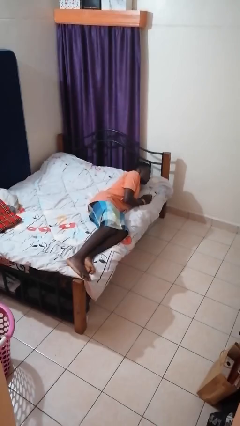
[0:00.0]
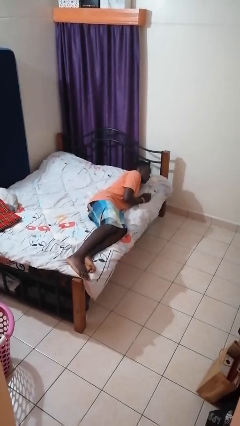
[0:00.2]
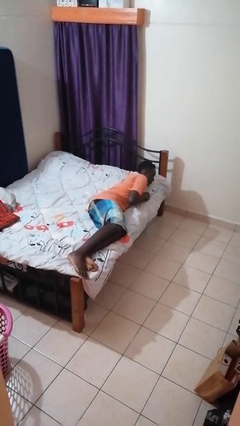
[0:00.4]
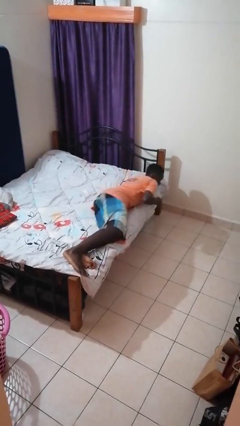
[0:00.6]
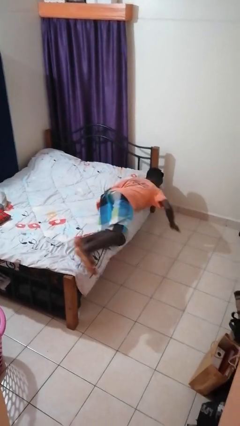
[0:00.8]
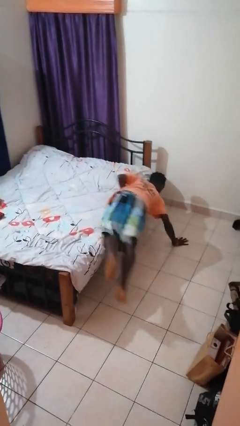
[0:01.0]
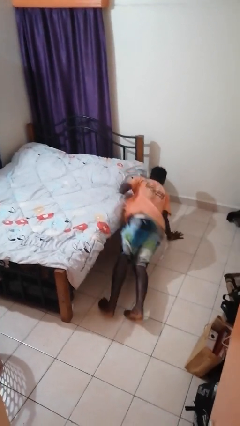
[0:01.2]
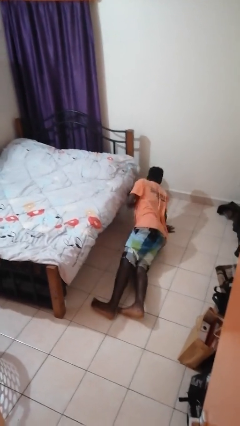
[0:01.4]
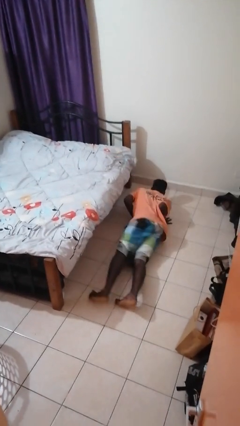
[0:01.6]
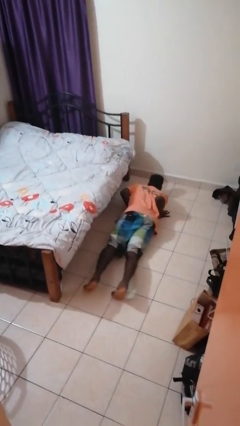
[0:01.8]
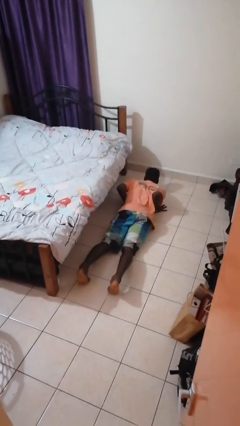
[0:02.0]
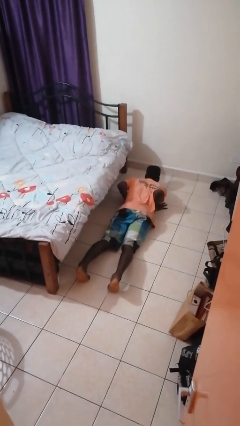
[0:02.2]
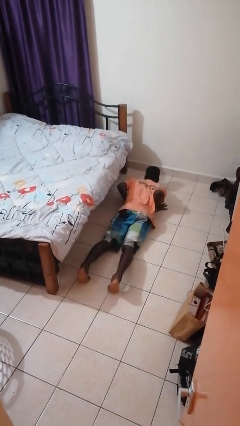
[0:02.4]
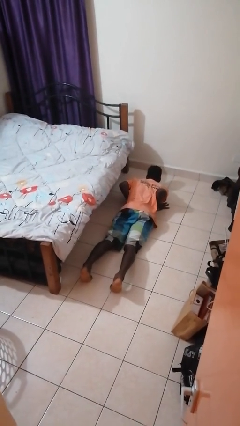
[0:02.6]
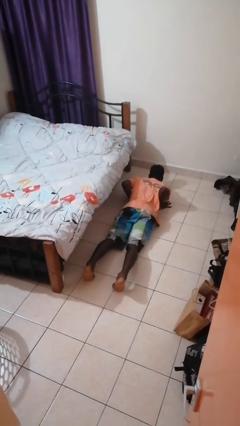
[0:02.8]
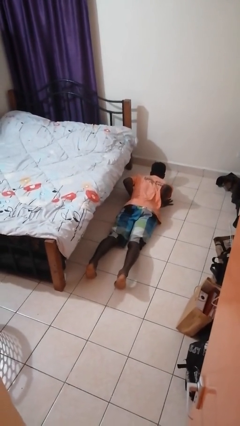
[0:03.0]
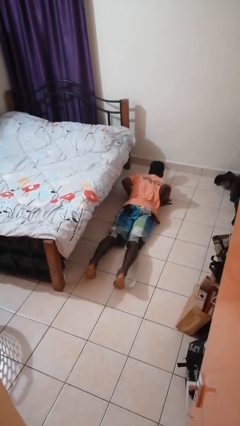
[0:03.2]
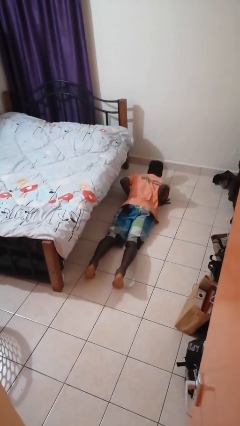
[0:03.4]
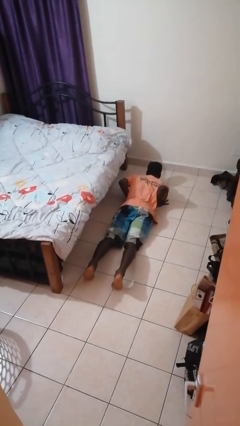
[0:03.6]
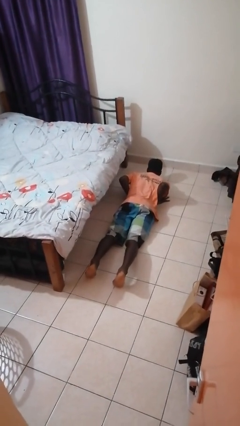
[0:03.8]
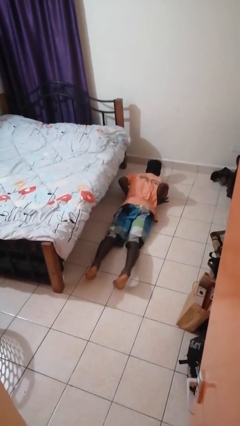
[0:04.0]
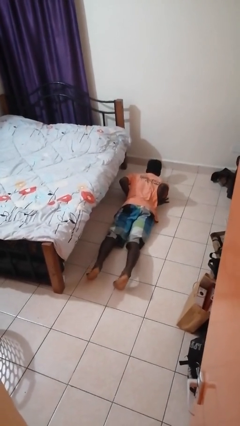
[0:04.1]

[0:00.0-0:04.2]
person falls from bed

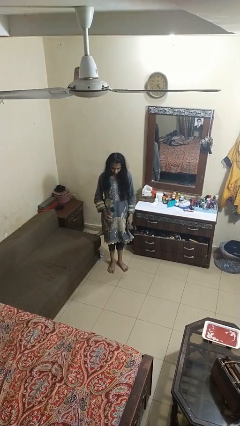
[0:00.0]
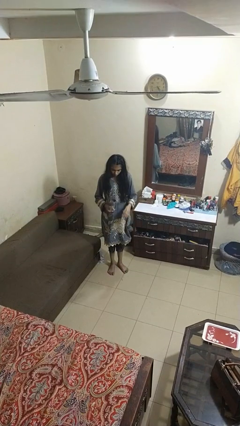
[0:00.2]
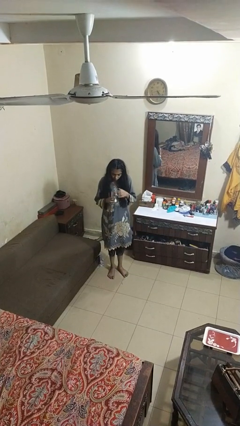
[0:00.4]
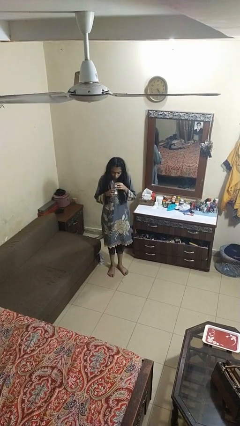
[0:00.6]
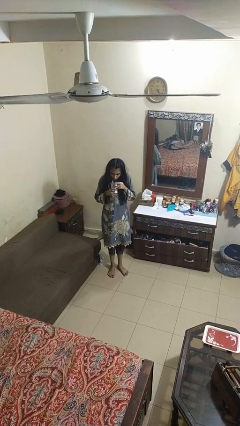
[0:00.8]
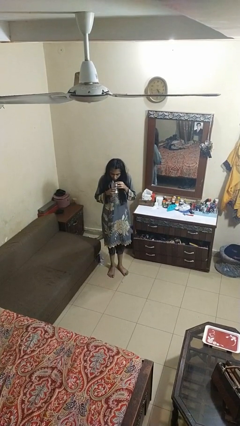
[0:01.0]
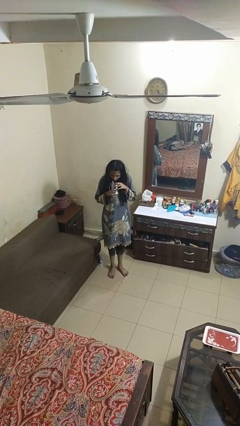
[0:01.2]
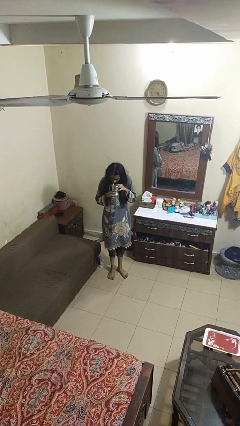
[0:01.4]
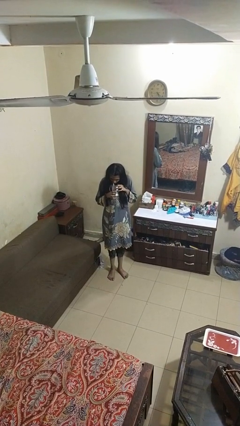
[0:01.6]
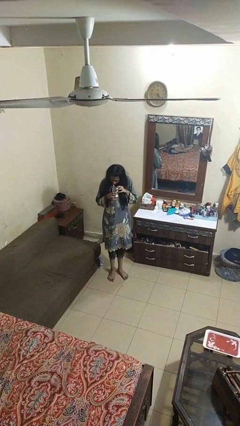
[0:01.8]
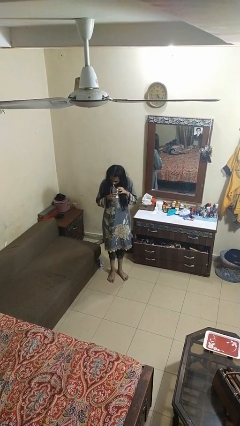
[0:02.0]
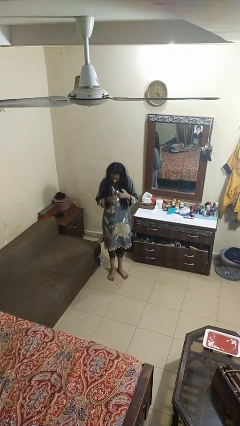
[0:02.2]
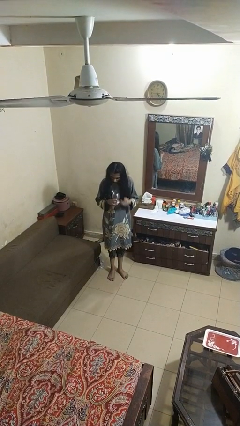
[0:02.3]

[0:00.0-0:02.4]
person drinks from straw

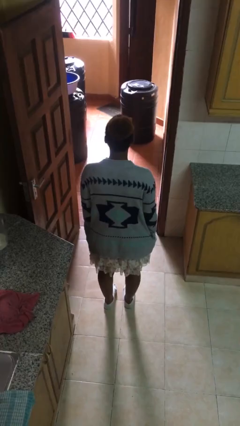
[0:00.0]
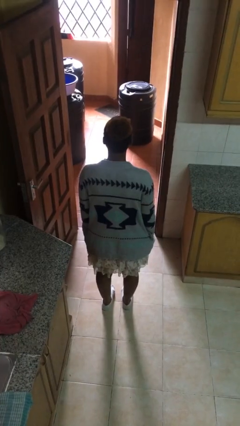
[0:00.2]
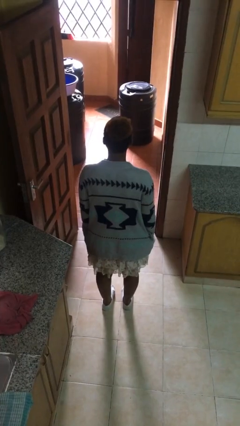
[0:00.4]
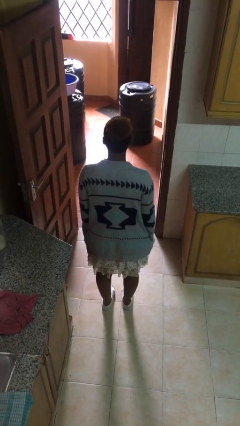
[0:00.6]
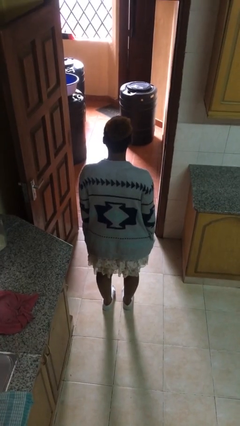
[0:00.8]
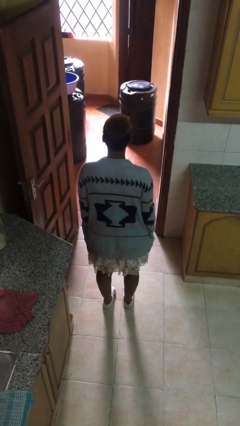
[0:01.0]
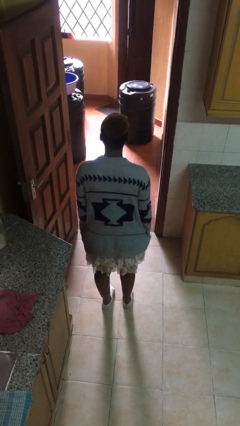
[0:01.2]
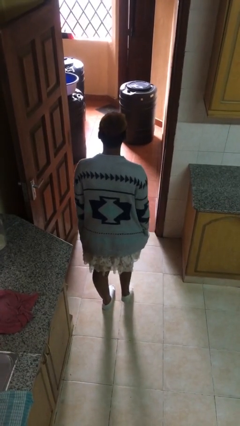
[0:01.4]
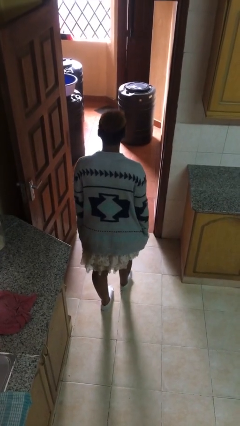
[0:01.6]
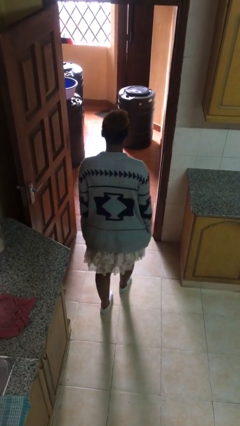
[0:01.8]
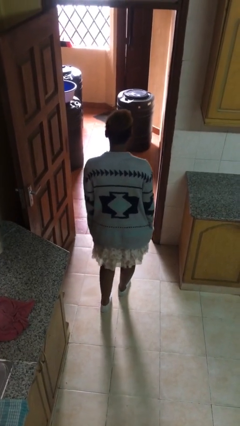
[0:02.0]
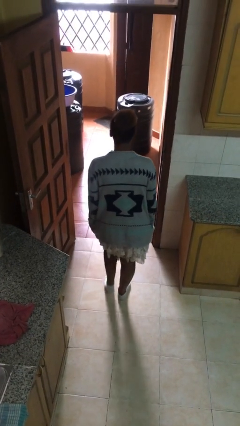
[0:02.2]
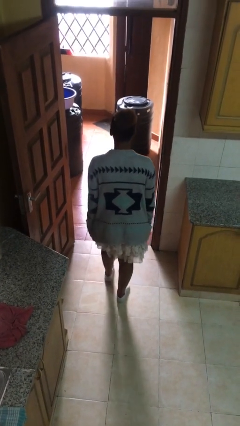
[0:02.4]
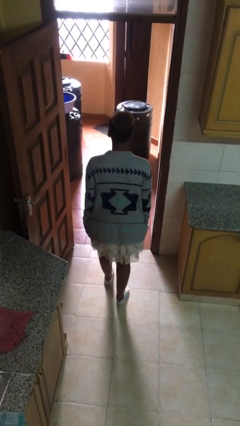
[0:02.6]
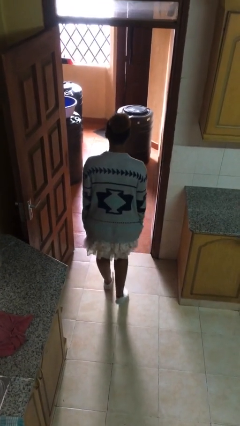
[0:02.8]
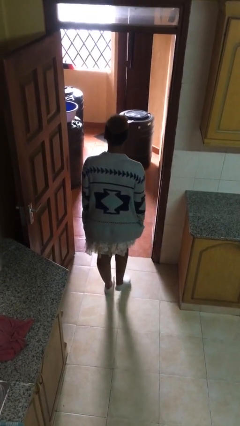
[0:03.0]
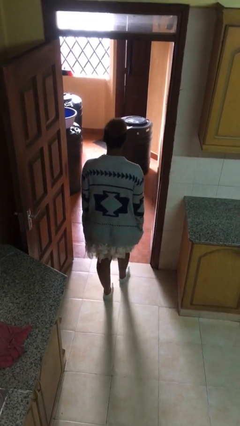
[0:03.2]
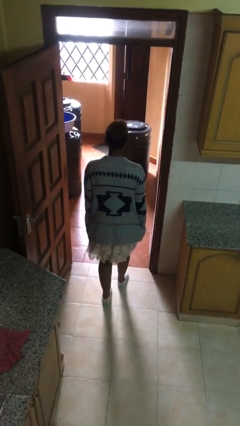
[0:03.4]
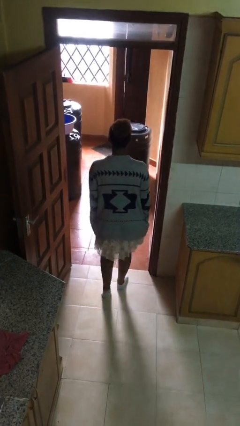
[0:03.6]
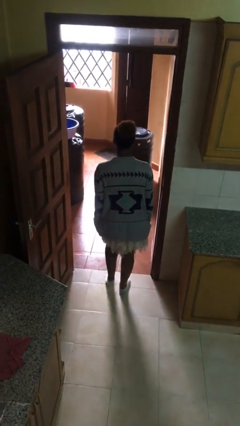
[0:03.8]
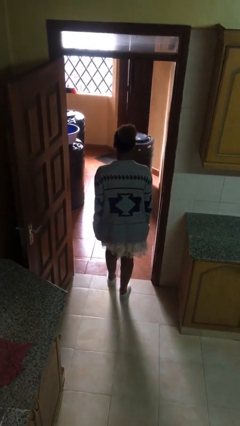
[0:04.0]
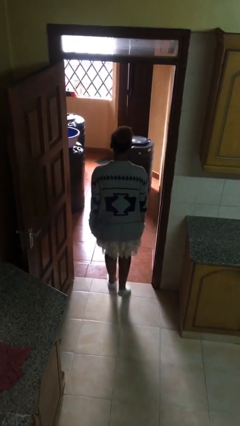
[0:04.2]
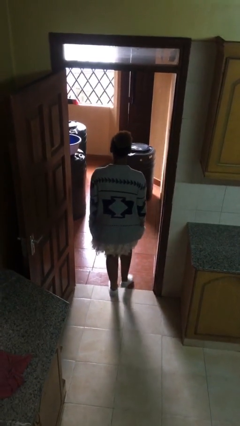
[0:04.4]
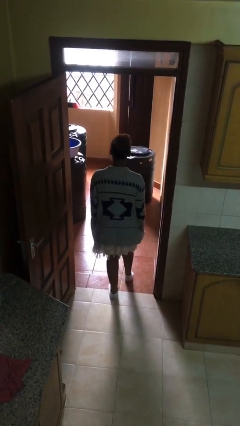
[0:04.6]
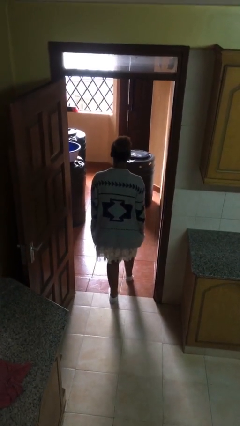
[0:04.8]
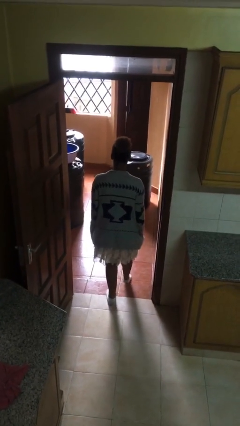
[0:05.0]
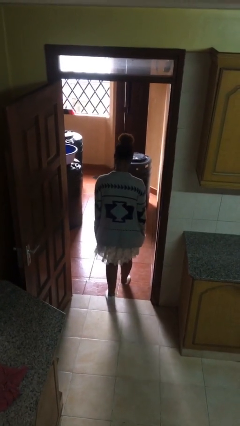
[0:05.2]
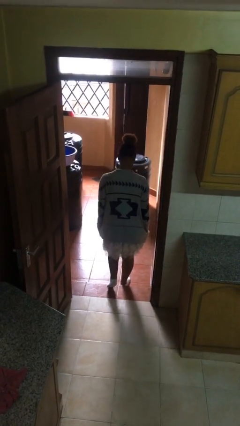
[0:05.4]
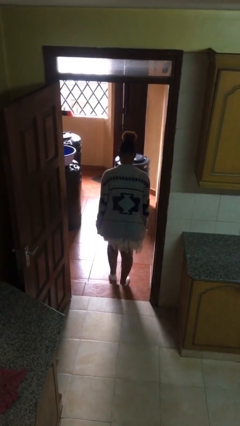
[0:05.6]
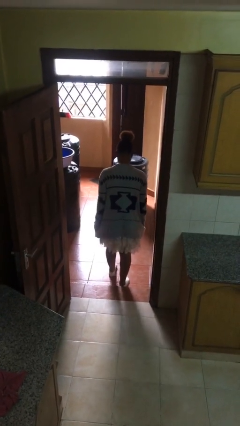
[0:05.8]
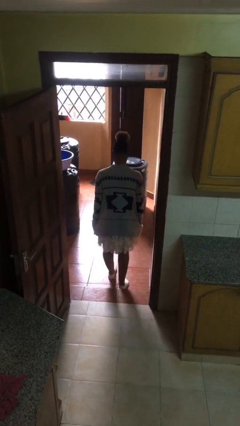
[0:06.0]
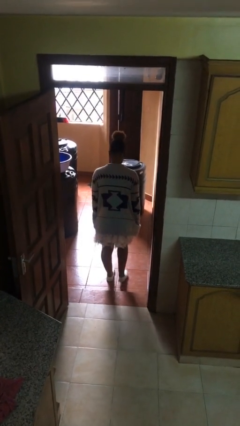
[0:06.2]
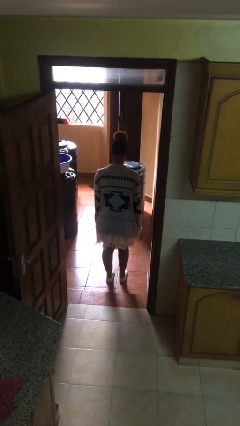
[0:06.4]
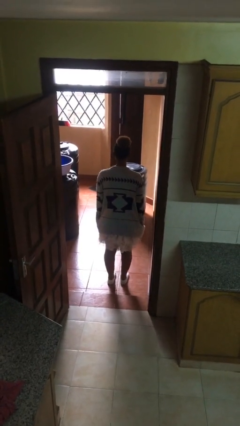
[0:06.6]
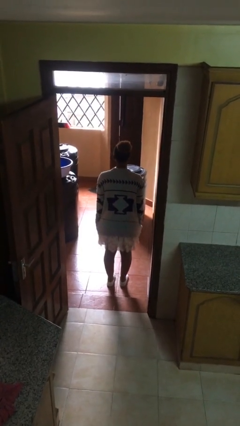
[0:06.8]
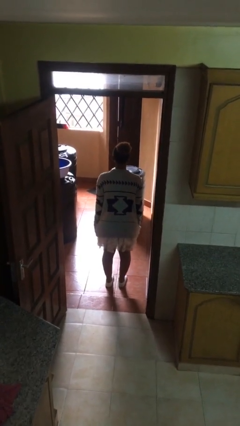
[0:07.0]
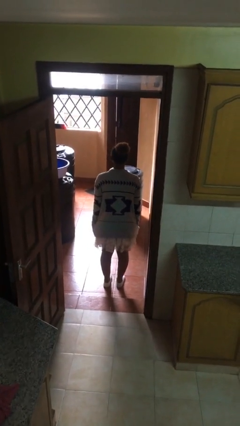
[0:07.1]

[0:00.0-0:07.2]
person exits scene through structure

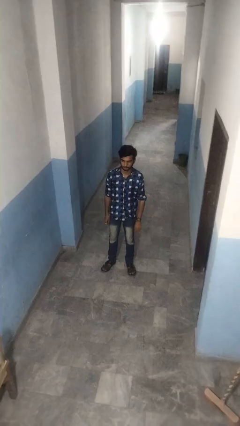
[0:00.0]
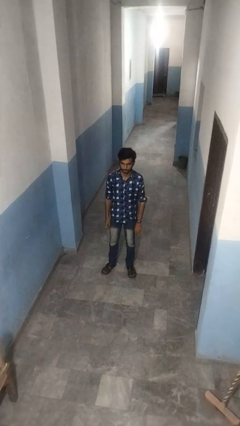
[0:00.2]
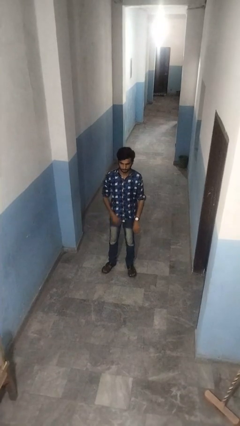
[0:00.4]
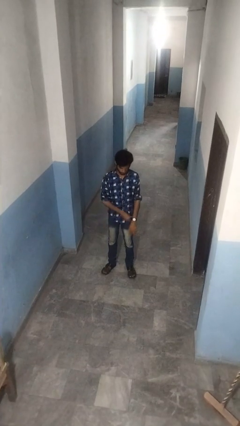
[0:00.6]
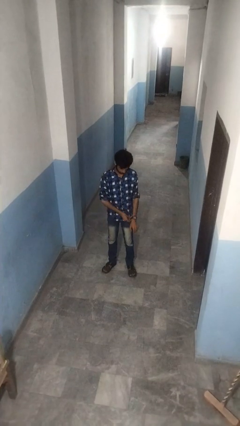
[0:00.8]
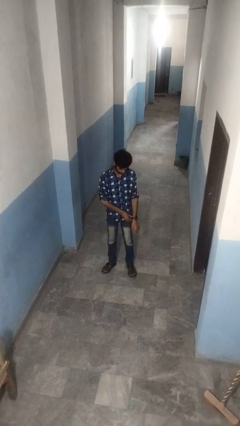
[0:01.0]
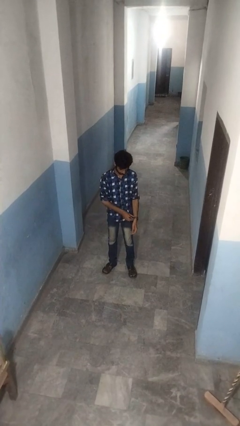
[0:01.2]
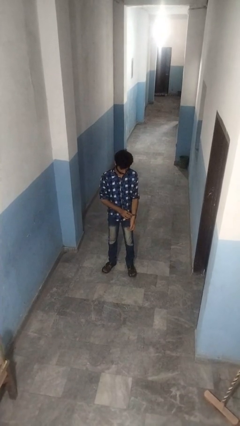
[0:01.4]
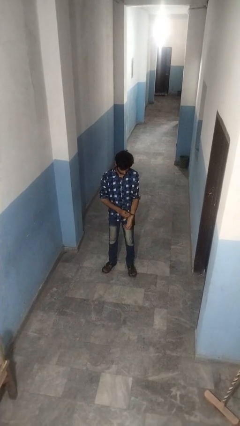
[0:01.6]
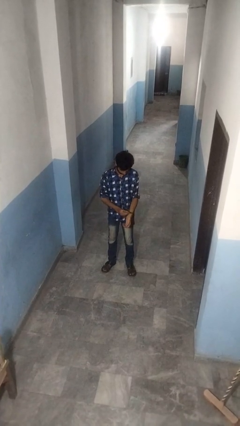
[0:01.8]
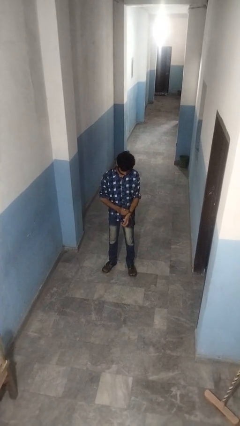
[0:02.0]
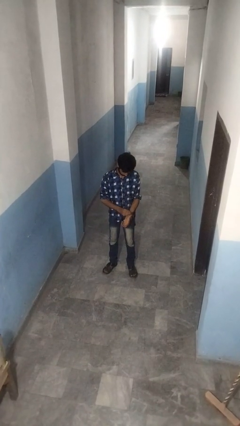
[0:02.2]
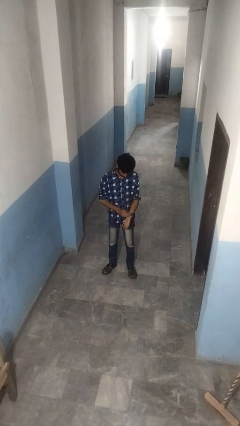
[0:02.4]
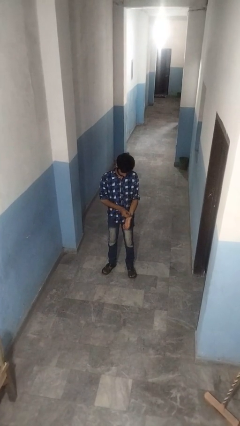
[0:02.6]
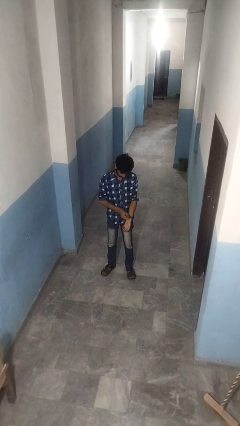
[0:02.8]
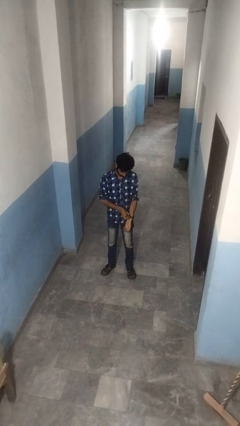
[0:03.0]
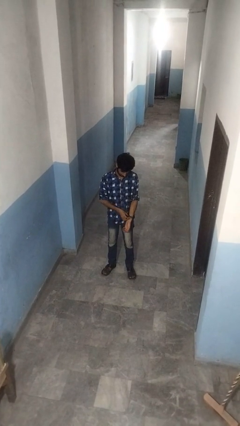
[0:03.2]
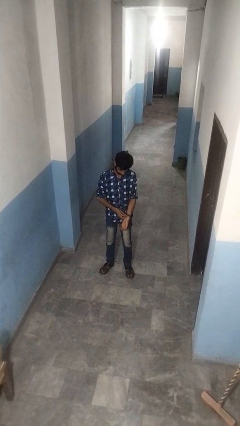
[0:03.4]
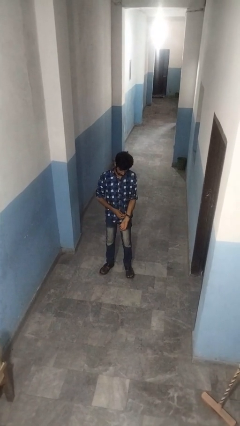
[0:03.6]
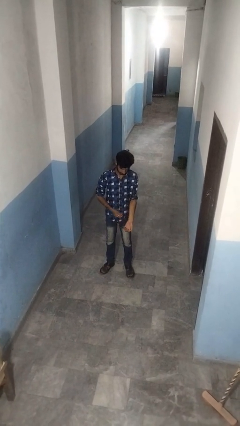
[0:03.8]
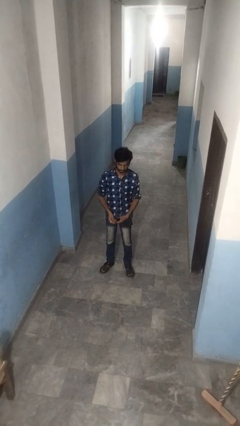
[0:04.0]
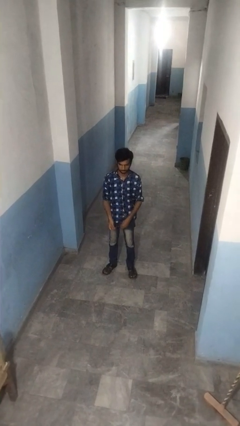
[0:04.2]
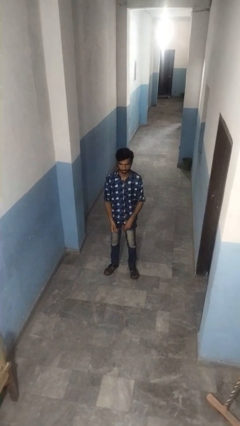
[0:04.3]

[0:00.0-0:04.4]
person takes off wristwatch
